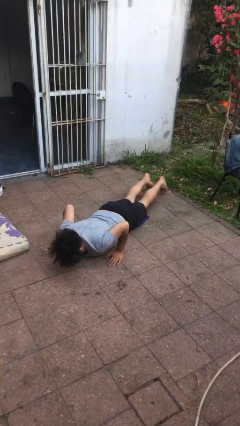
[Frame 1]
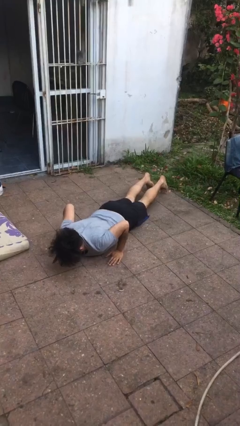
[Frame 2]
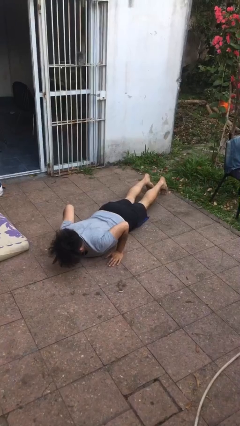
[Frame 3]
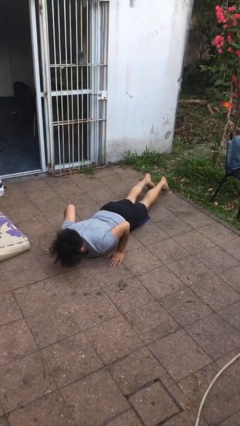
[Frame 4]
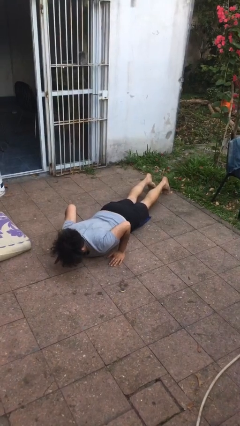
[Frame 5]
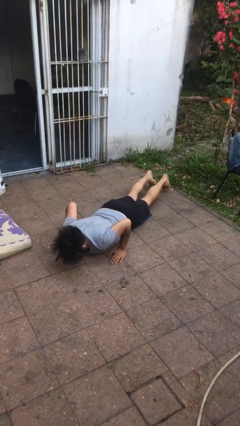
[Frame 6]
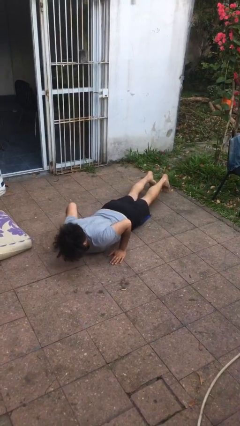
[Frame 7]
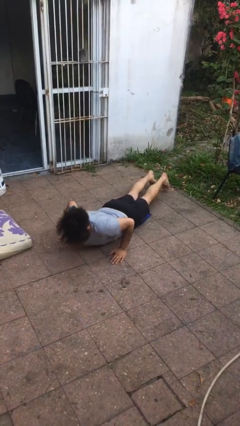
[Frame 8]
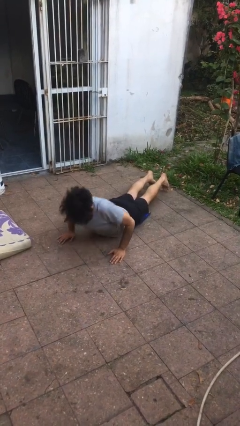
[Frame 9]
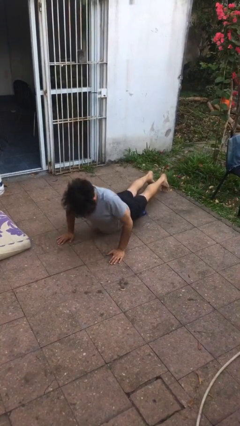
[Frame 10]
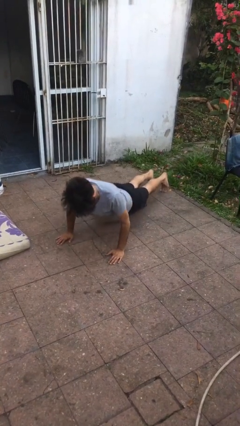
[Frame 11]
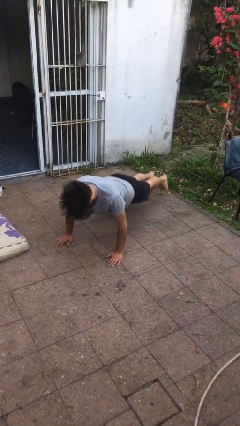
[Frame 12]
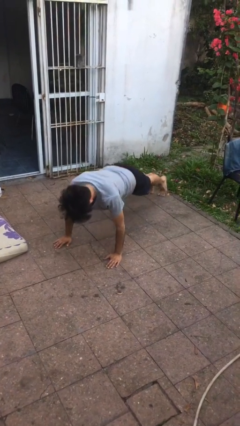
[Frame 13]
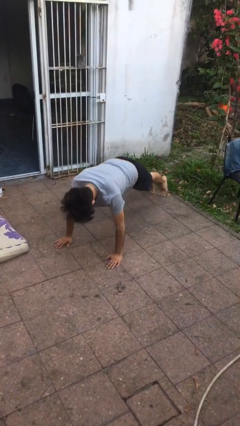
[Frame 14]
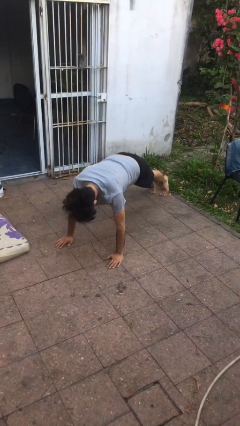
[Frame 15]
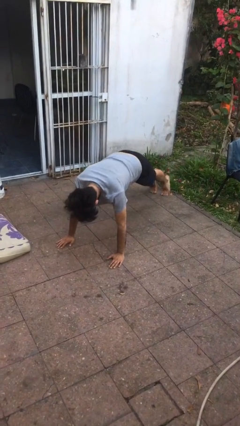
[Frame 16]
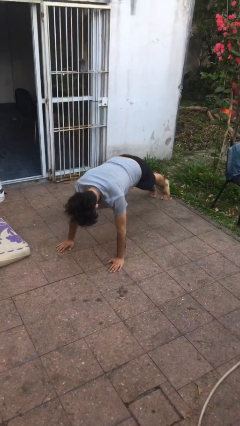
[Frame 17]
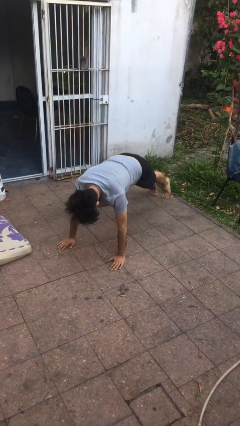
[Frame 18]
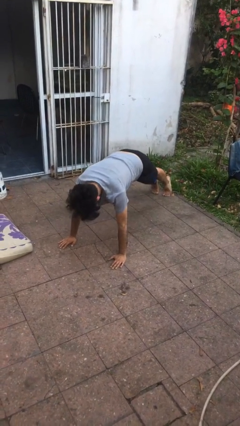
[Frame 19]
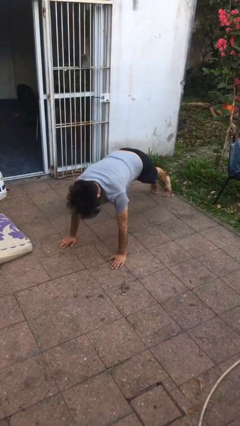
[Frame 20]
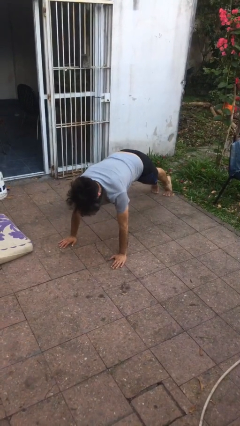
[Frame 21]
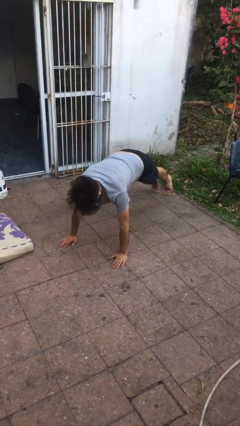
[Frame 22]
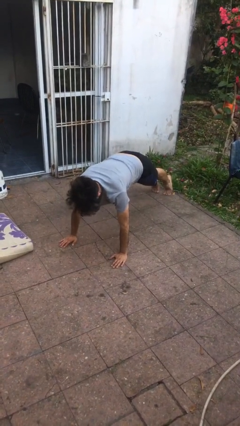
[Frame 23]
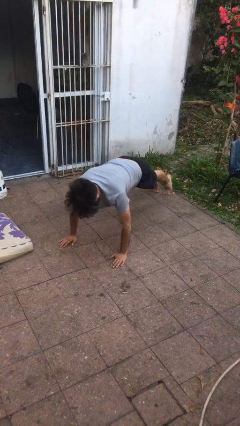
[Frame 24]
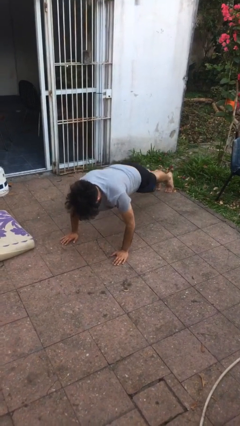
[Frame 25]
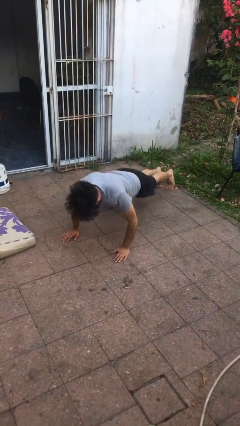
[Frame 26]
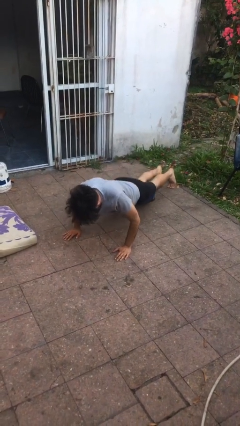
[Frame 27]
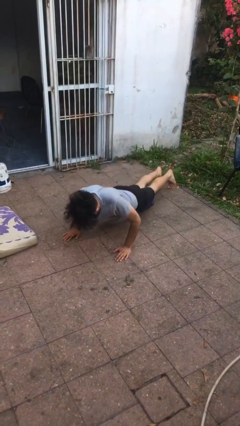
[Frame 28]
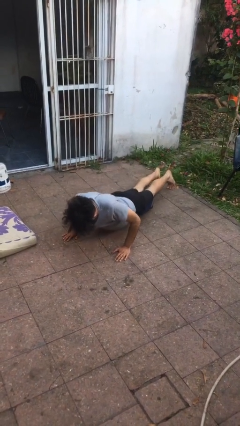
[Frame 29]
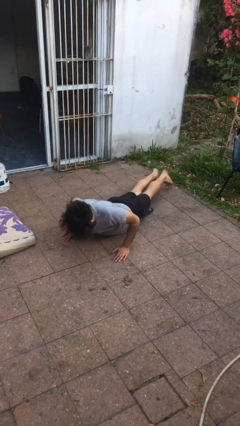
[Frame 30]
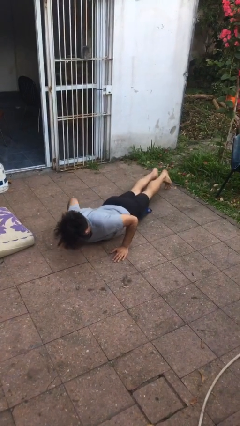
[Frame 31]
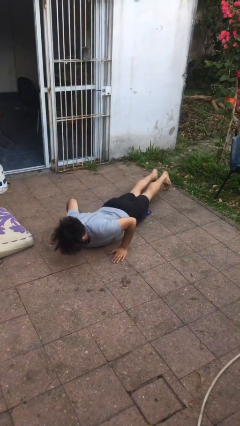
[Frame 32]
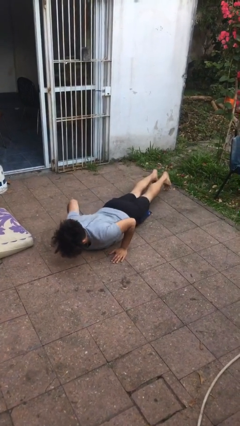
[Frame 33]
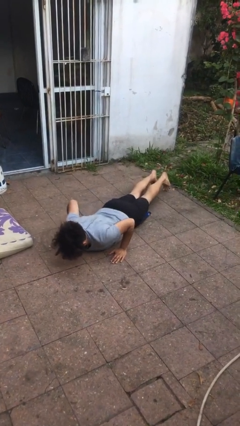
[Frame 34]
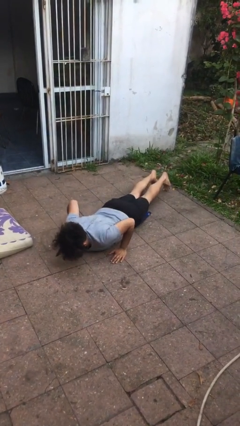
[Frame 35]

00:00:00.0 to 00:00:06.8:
person exercises with pushup

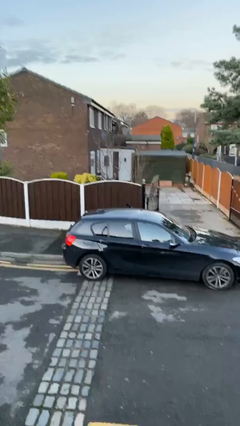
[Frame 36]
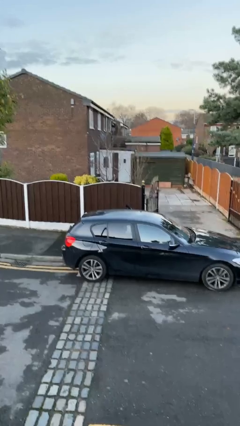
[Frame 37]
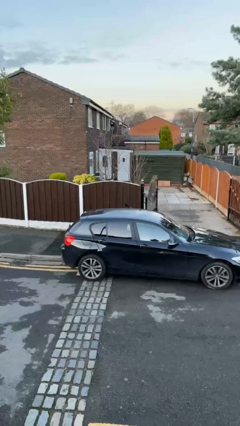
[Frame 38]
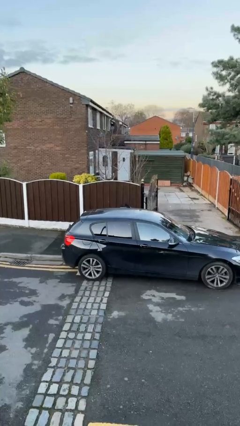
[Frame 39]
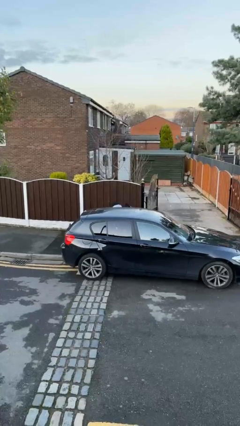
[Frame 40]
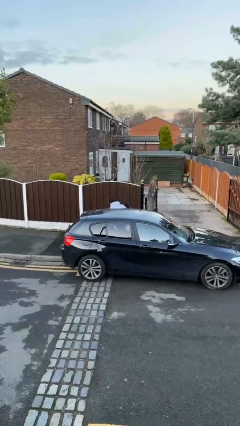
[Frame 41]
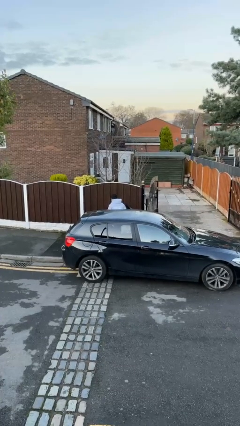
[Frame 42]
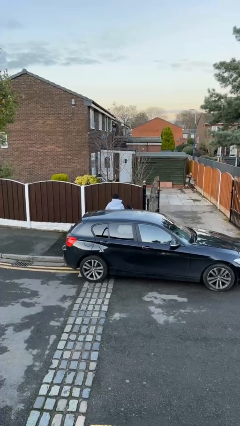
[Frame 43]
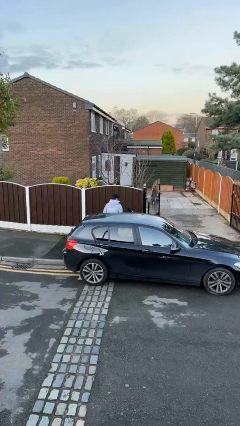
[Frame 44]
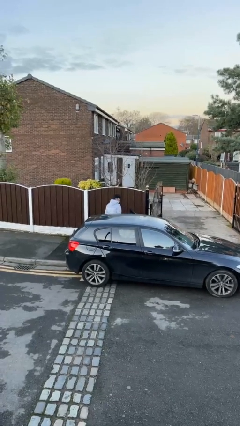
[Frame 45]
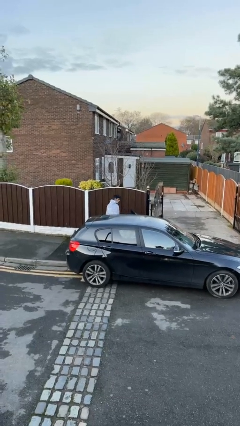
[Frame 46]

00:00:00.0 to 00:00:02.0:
person exits car

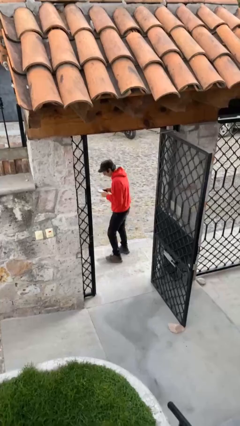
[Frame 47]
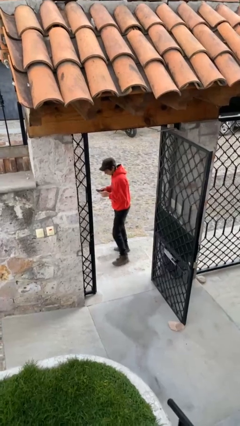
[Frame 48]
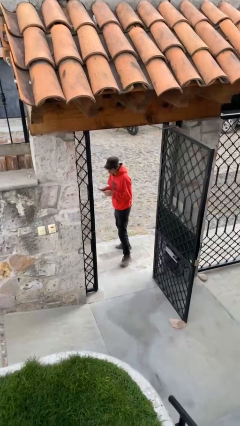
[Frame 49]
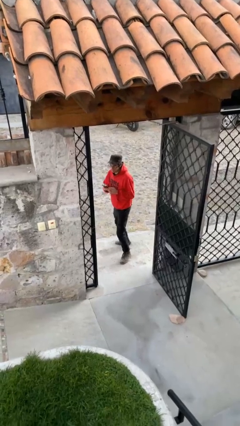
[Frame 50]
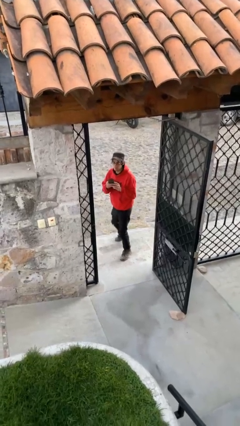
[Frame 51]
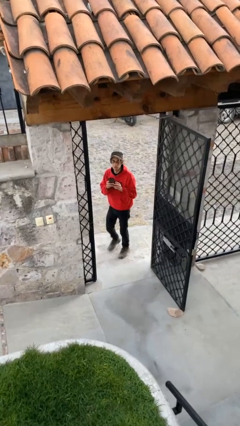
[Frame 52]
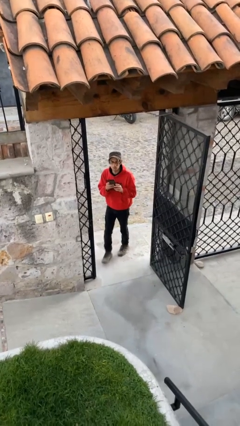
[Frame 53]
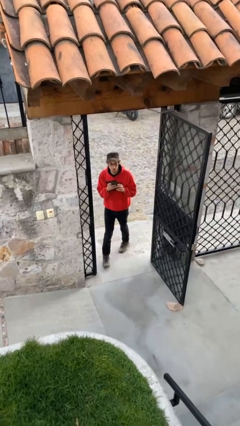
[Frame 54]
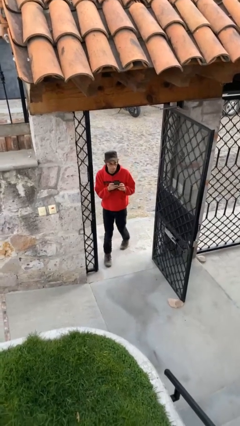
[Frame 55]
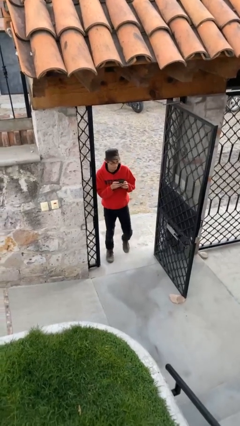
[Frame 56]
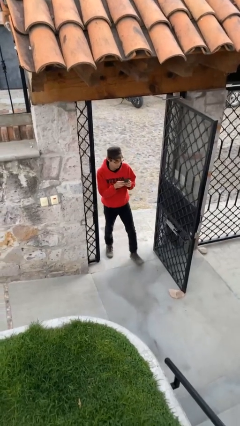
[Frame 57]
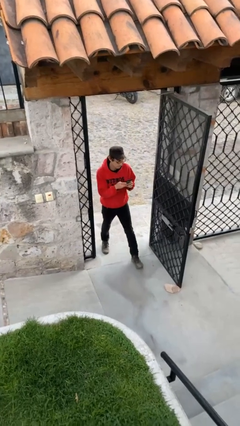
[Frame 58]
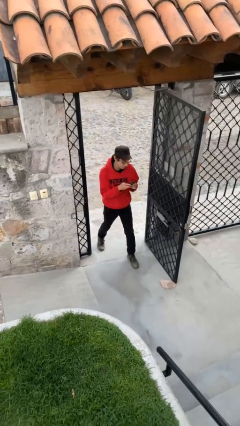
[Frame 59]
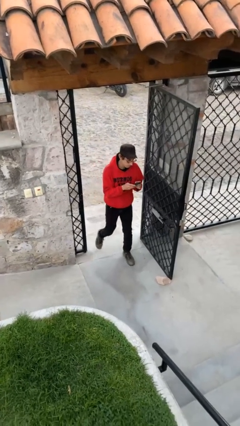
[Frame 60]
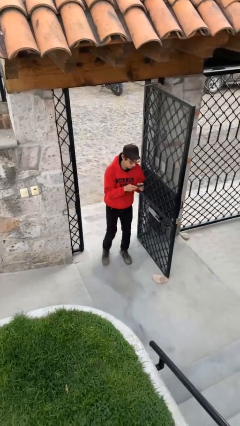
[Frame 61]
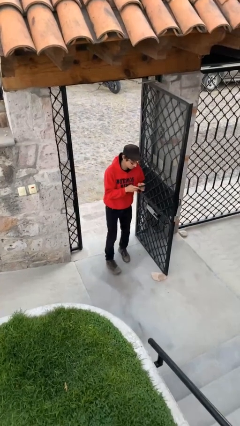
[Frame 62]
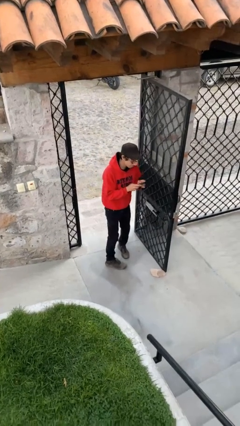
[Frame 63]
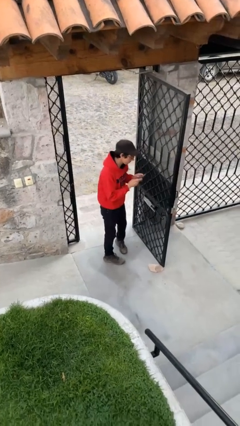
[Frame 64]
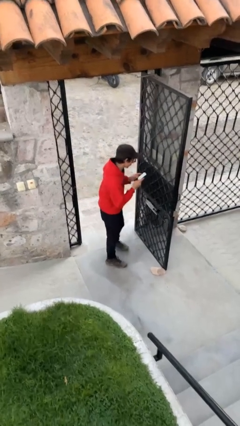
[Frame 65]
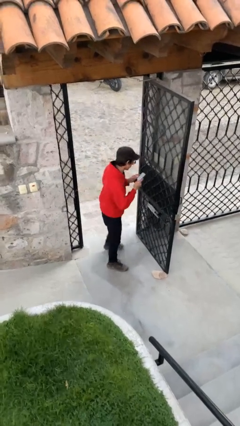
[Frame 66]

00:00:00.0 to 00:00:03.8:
person enters scene through structure

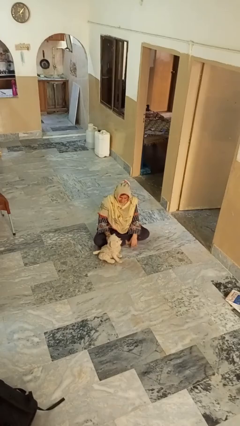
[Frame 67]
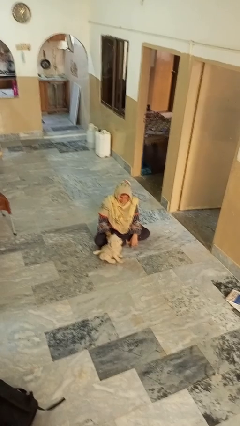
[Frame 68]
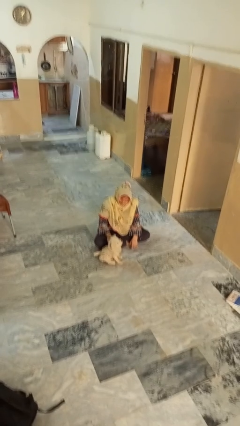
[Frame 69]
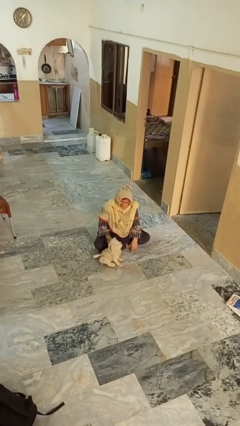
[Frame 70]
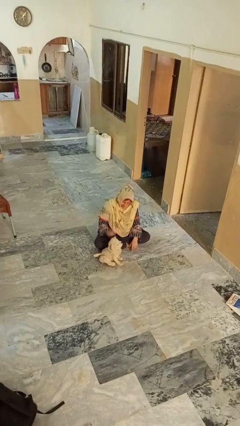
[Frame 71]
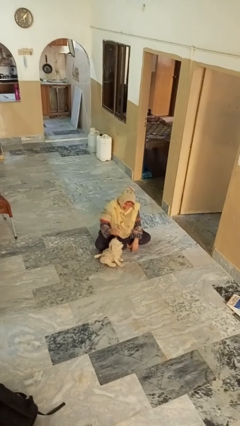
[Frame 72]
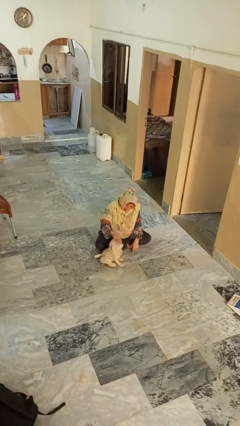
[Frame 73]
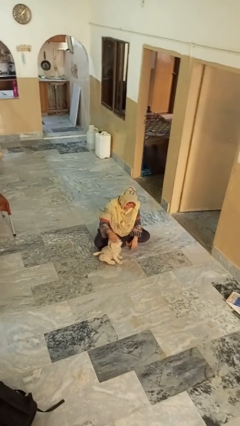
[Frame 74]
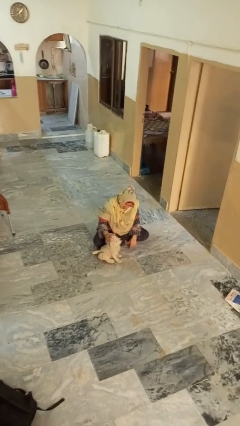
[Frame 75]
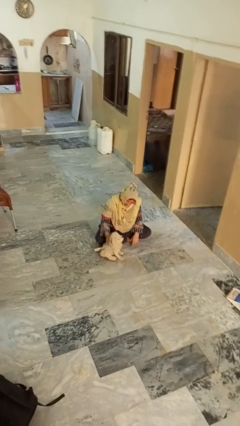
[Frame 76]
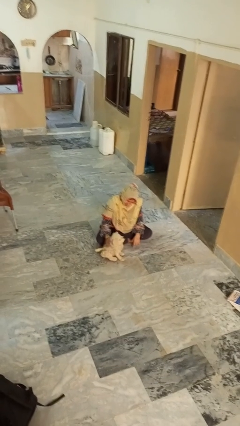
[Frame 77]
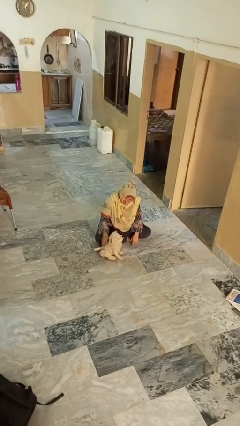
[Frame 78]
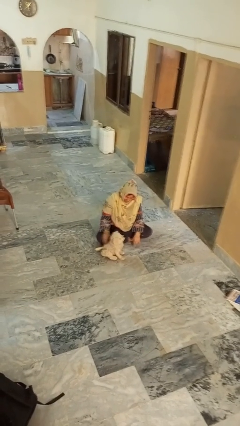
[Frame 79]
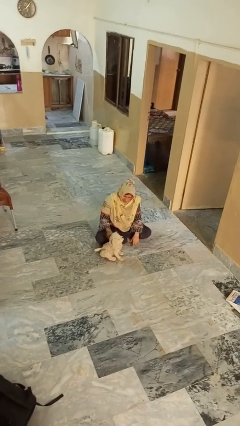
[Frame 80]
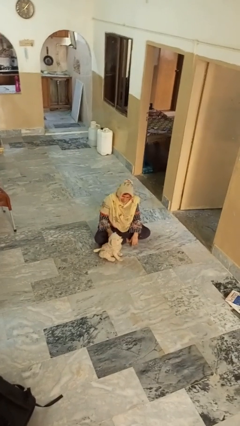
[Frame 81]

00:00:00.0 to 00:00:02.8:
person pets dog

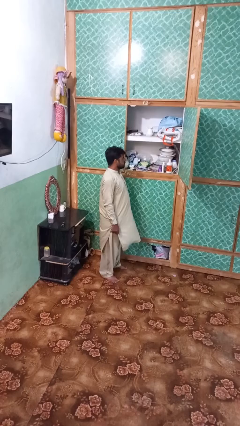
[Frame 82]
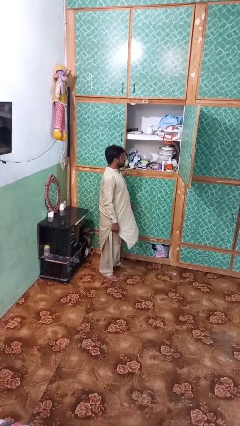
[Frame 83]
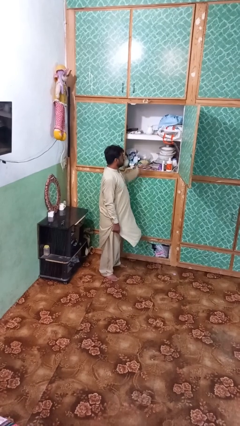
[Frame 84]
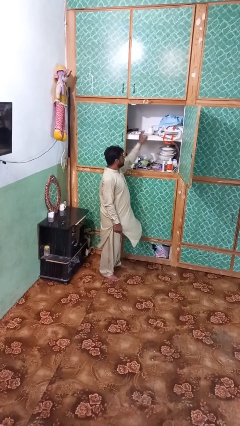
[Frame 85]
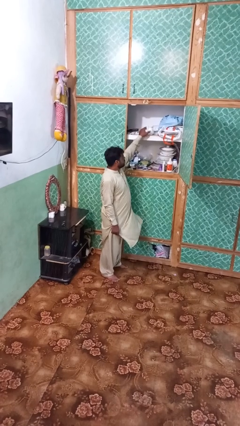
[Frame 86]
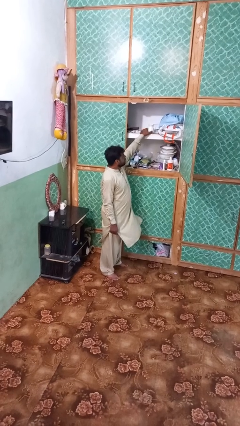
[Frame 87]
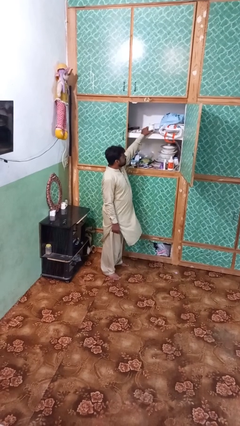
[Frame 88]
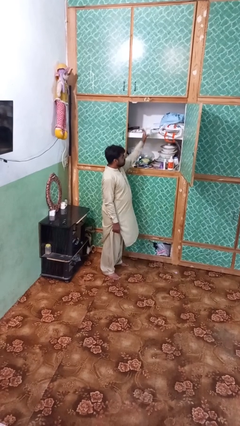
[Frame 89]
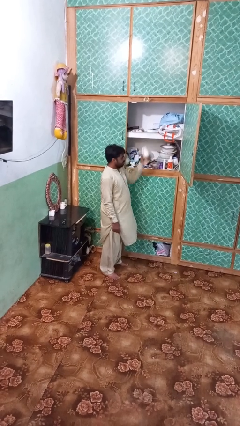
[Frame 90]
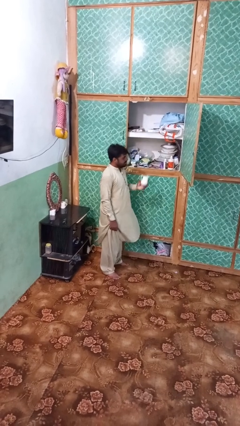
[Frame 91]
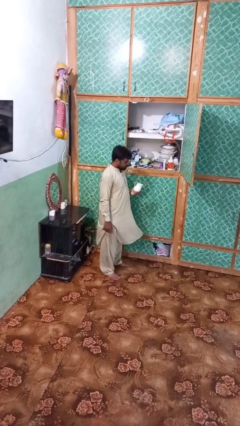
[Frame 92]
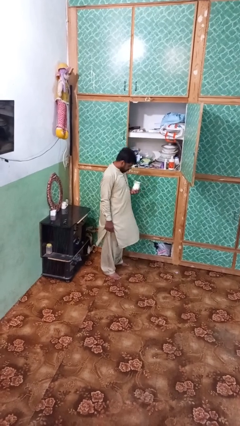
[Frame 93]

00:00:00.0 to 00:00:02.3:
person picks up object from shelf

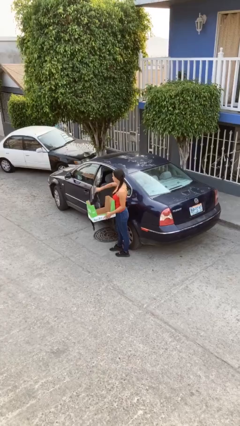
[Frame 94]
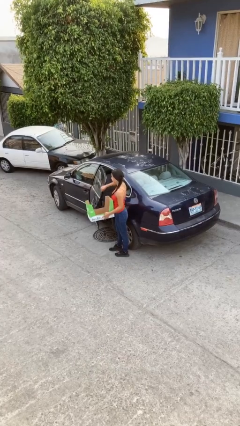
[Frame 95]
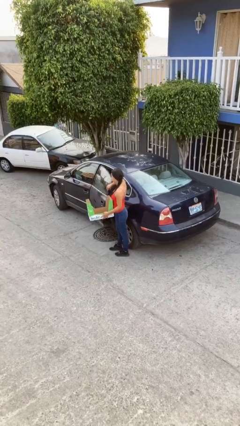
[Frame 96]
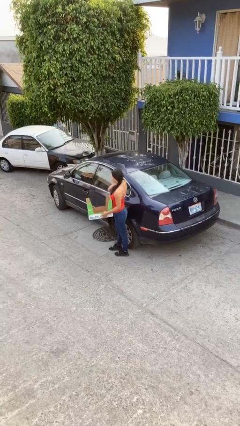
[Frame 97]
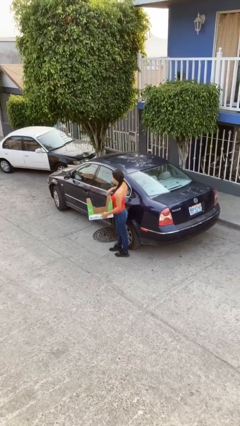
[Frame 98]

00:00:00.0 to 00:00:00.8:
person closes car door
